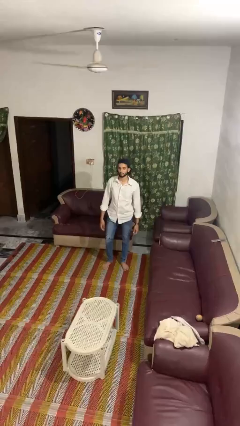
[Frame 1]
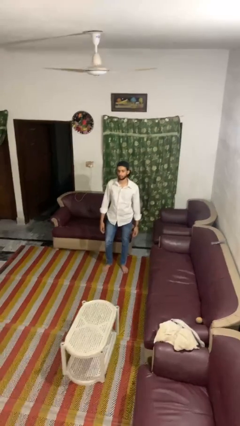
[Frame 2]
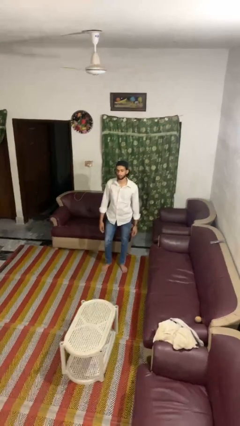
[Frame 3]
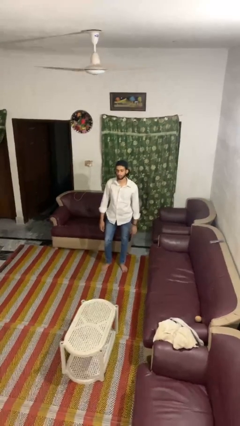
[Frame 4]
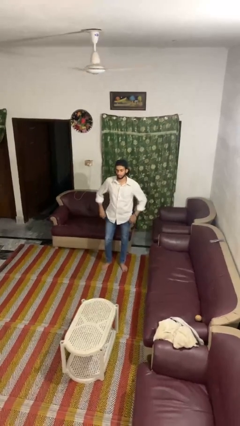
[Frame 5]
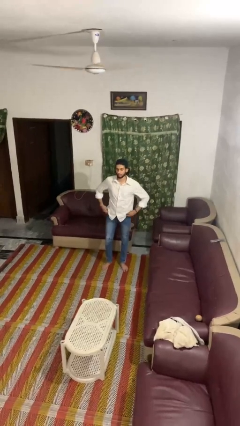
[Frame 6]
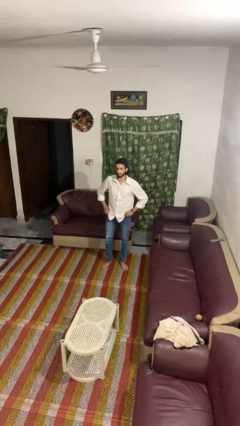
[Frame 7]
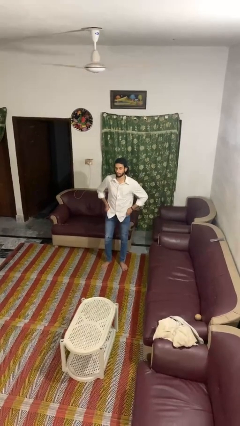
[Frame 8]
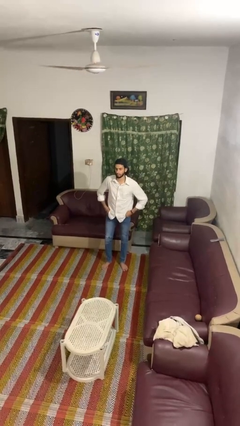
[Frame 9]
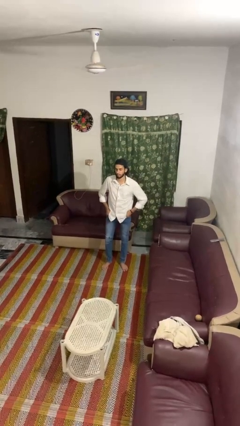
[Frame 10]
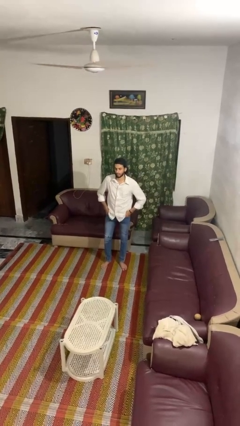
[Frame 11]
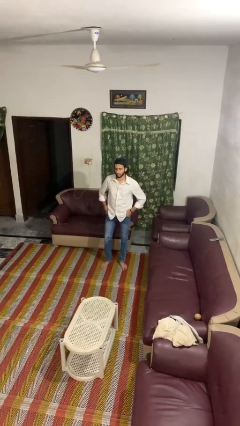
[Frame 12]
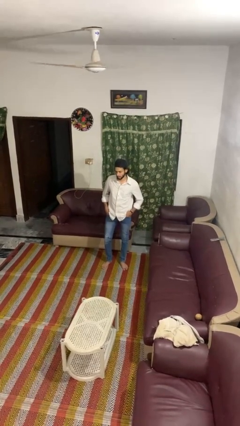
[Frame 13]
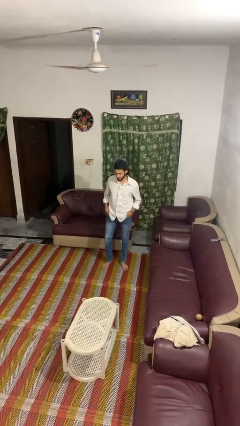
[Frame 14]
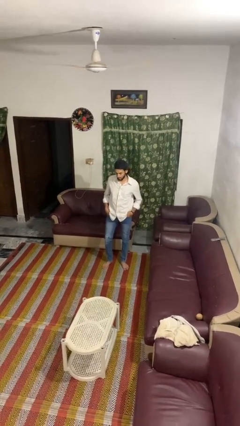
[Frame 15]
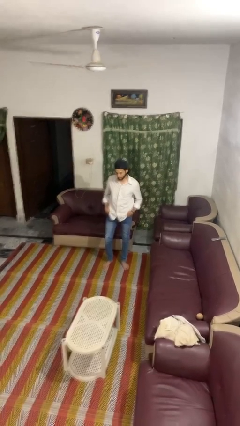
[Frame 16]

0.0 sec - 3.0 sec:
person puts hands in back pockets

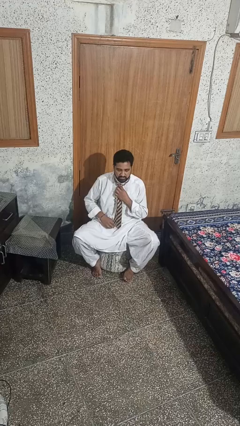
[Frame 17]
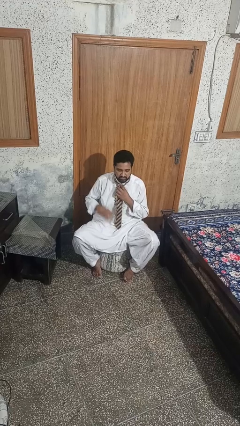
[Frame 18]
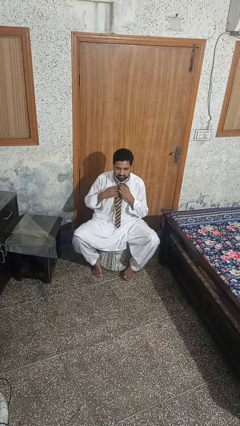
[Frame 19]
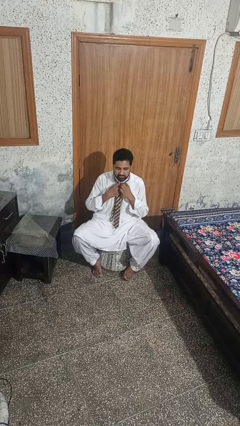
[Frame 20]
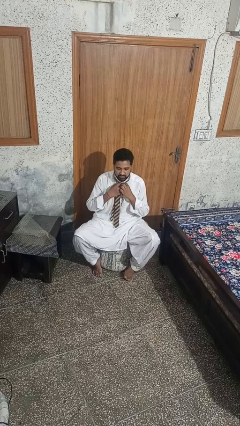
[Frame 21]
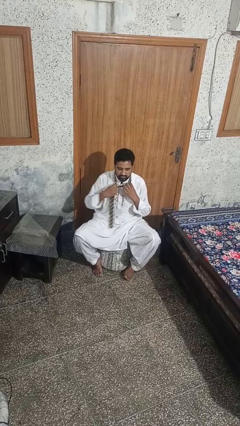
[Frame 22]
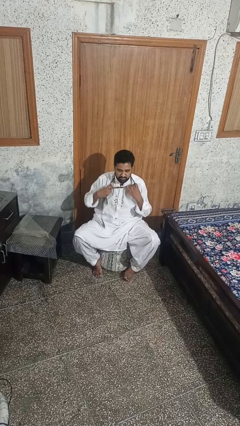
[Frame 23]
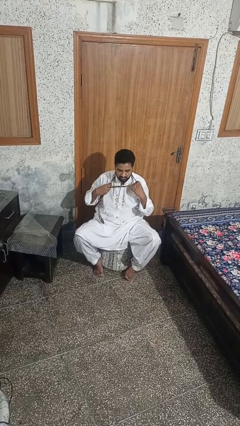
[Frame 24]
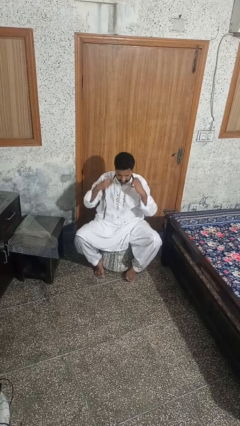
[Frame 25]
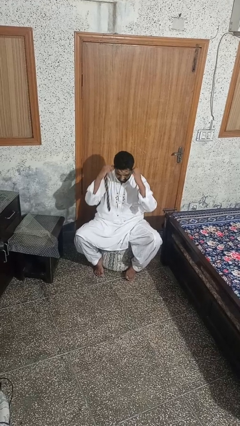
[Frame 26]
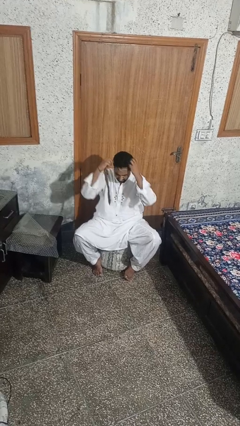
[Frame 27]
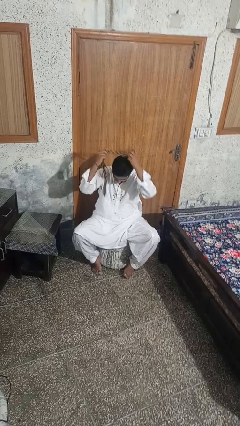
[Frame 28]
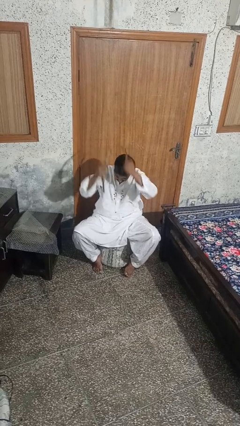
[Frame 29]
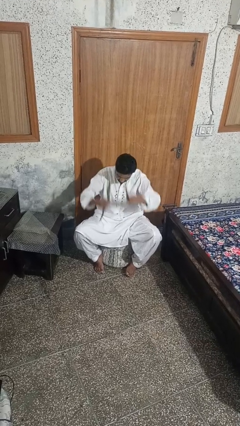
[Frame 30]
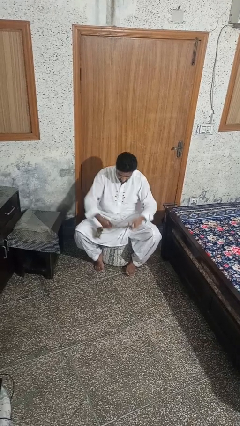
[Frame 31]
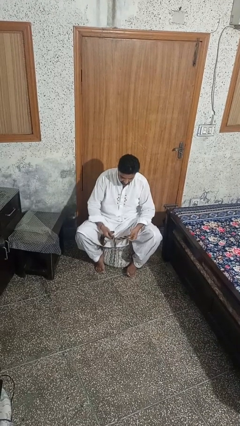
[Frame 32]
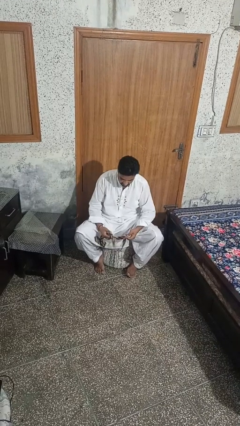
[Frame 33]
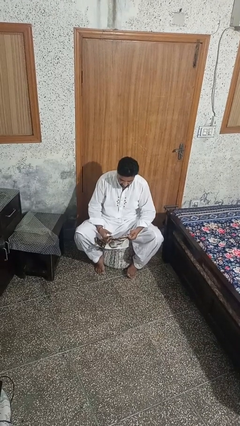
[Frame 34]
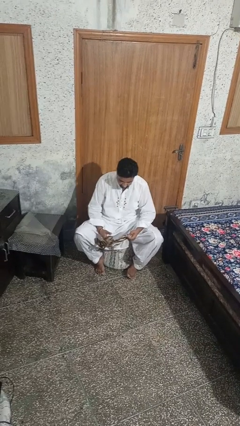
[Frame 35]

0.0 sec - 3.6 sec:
person takes off necktie

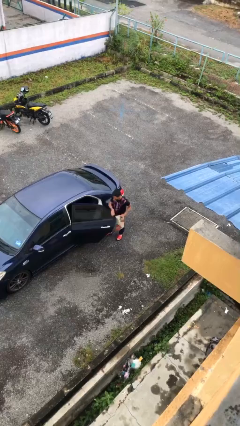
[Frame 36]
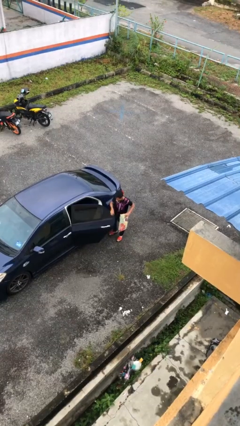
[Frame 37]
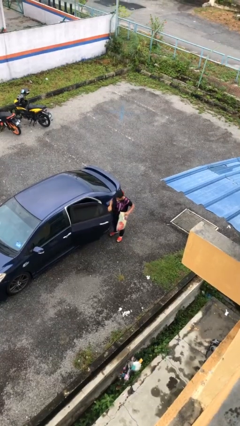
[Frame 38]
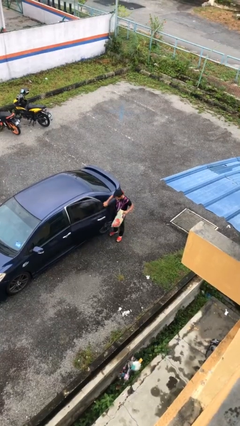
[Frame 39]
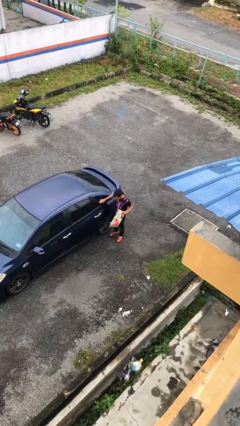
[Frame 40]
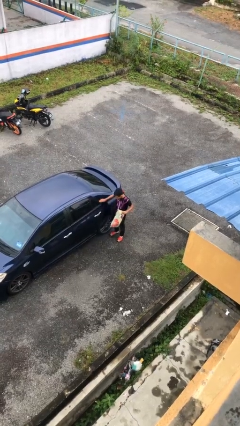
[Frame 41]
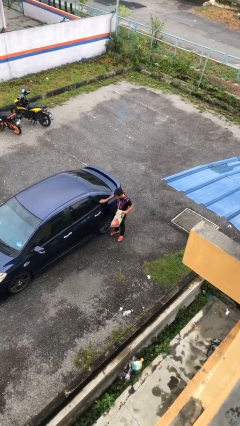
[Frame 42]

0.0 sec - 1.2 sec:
person closes car door

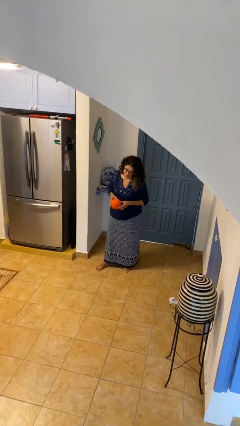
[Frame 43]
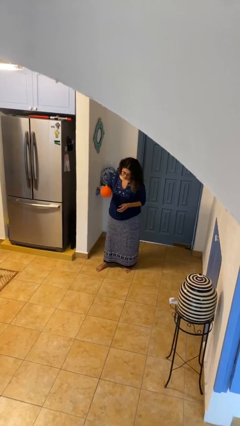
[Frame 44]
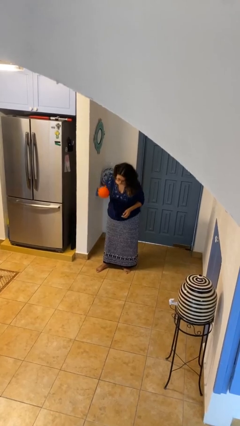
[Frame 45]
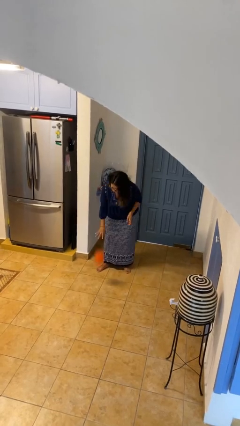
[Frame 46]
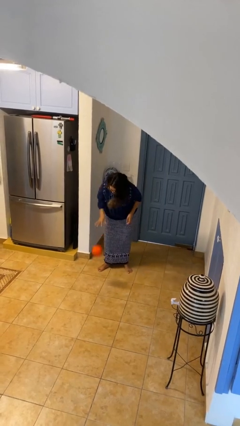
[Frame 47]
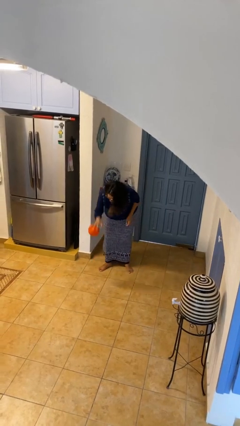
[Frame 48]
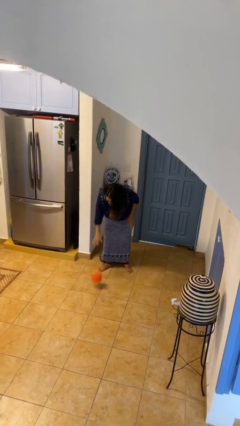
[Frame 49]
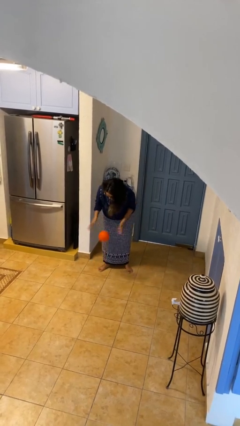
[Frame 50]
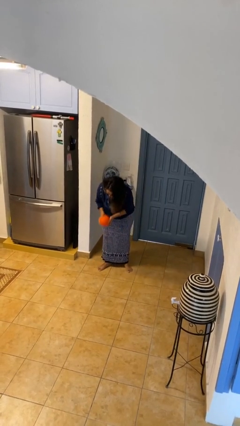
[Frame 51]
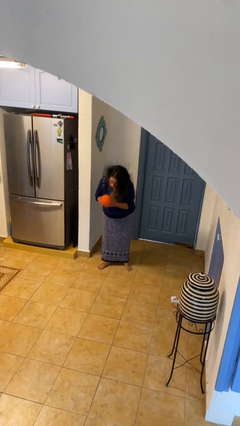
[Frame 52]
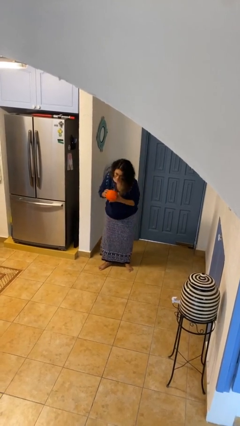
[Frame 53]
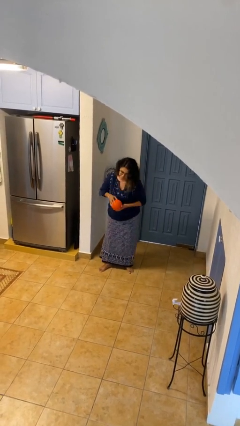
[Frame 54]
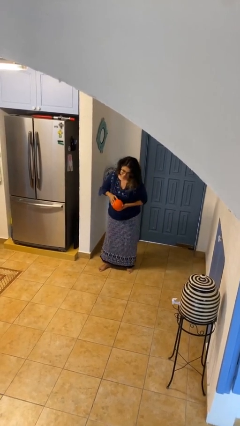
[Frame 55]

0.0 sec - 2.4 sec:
person bounces ball on floor

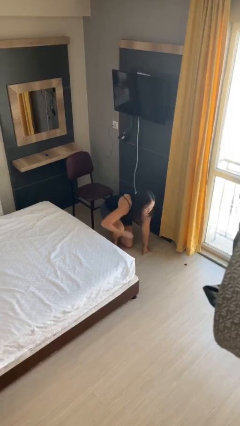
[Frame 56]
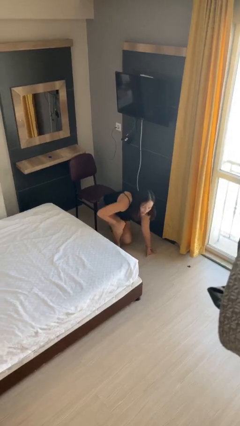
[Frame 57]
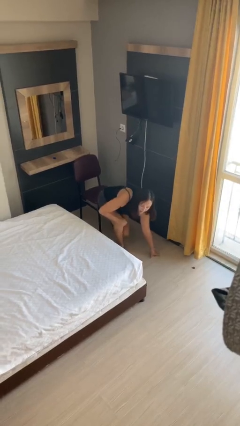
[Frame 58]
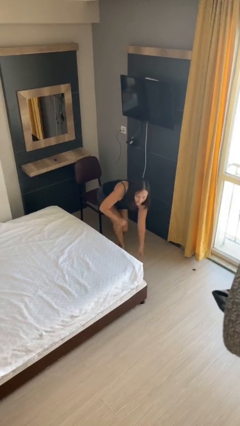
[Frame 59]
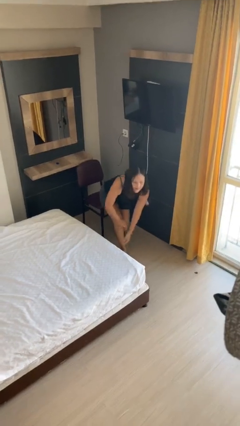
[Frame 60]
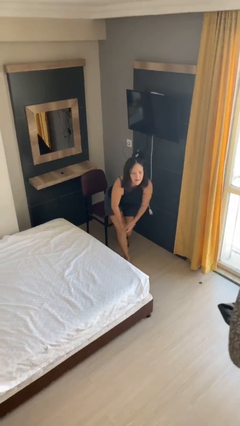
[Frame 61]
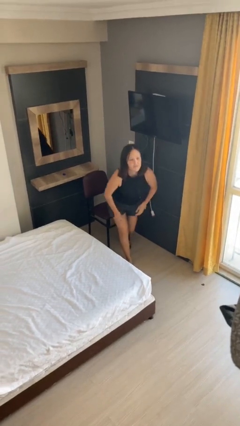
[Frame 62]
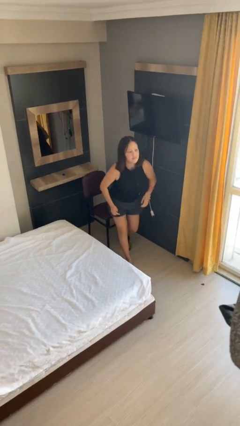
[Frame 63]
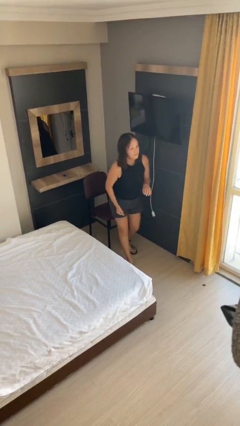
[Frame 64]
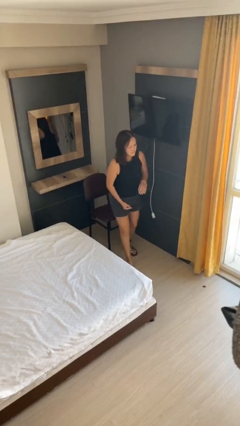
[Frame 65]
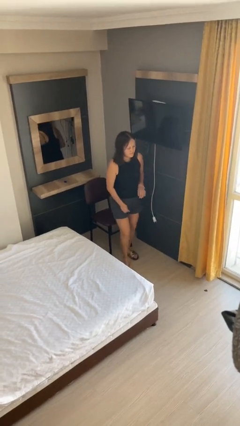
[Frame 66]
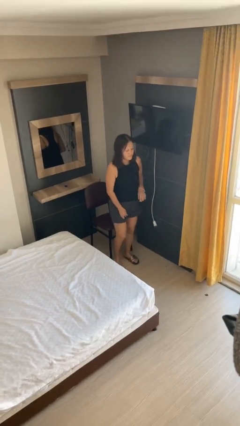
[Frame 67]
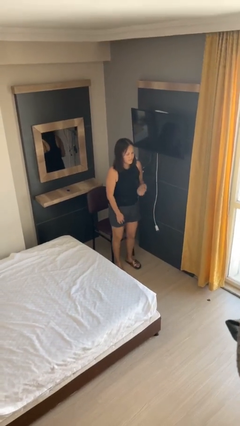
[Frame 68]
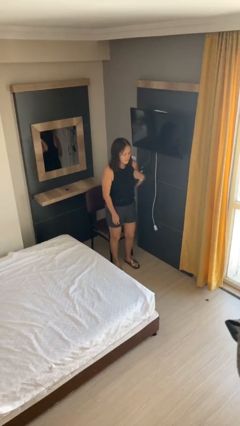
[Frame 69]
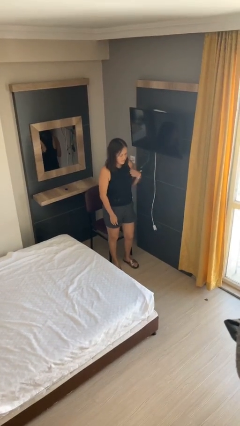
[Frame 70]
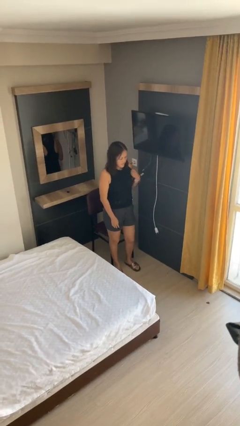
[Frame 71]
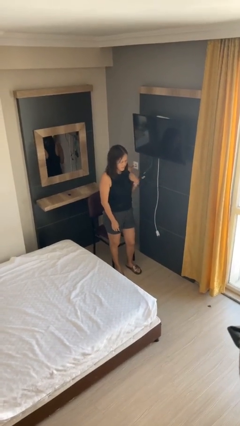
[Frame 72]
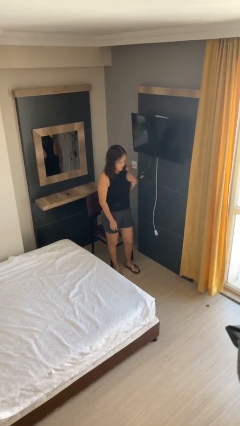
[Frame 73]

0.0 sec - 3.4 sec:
person stands up from floor

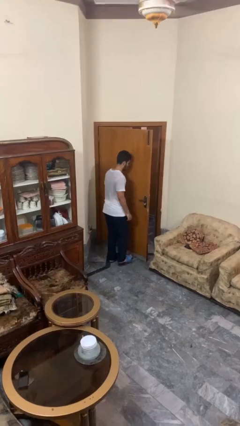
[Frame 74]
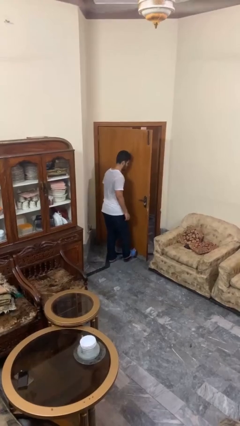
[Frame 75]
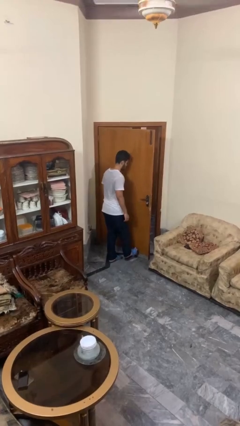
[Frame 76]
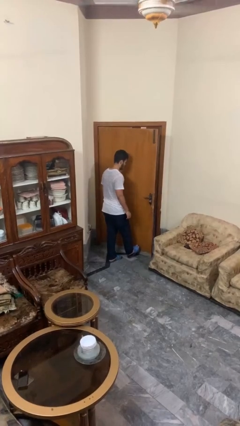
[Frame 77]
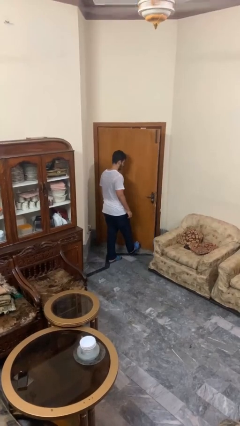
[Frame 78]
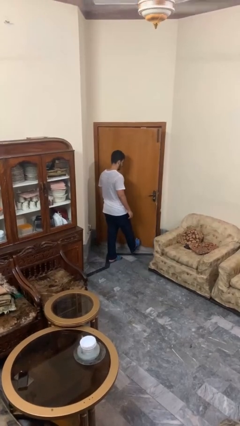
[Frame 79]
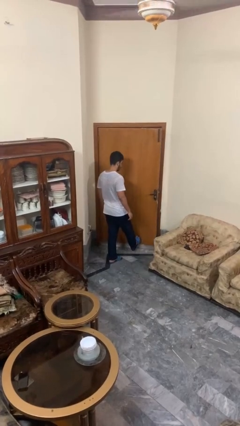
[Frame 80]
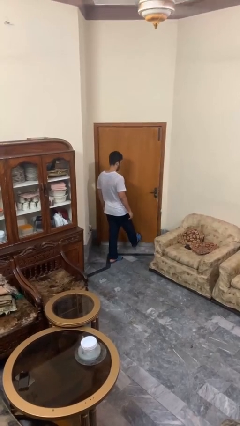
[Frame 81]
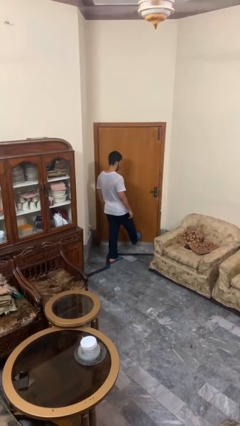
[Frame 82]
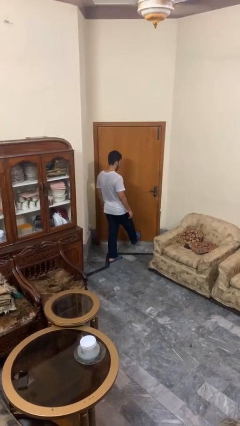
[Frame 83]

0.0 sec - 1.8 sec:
person closes door with foot

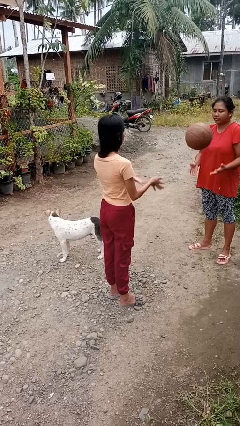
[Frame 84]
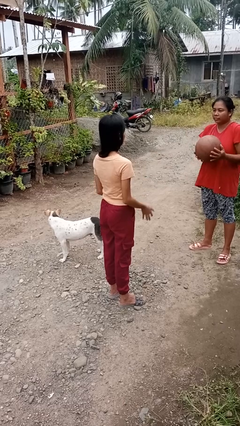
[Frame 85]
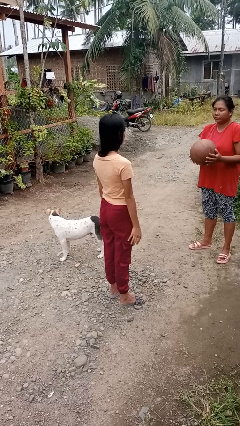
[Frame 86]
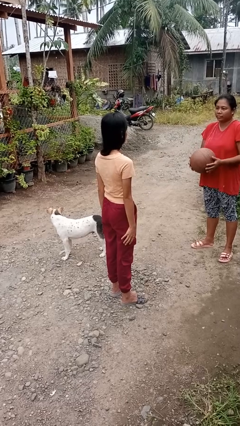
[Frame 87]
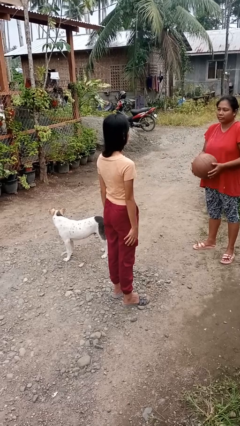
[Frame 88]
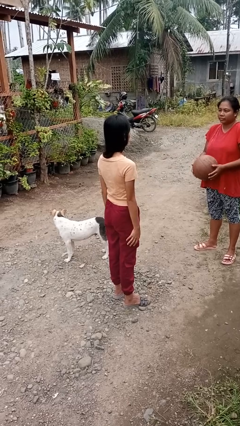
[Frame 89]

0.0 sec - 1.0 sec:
person throws object to person

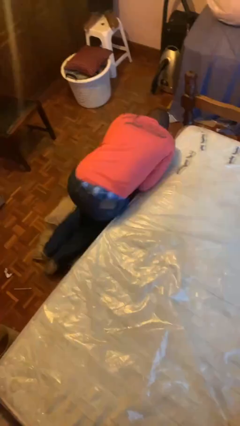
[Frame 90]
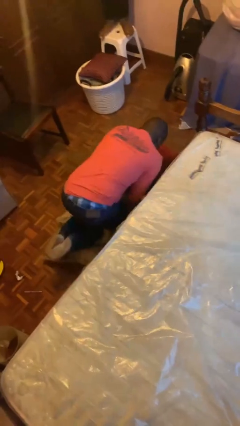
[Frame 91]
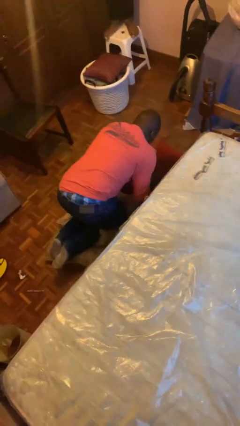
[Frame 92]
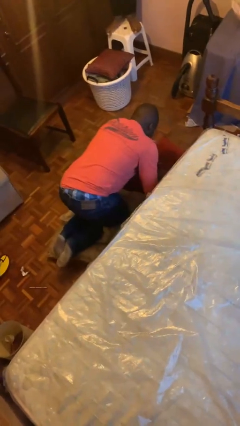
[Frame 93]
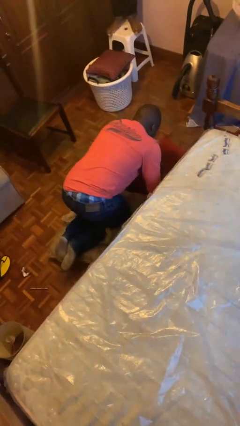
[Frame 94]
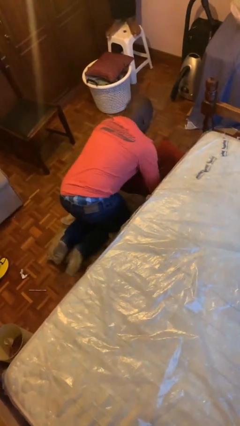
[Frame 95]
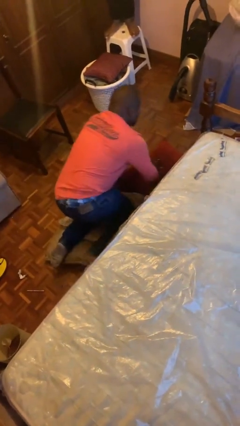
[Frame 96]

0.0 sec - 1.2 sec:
person falls from bed
